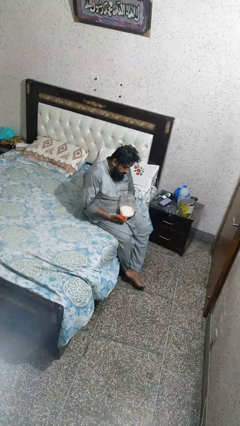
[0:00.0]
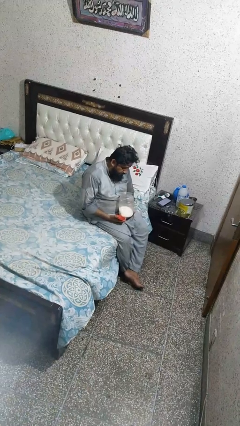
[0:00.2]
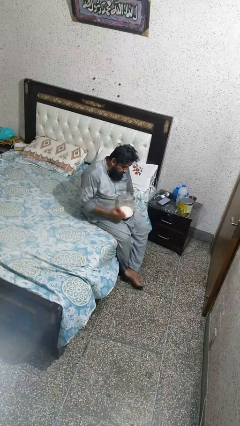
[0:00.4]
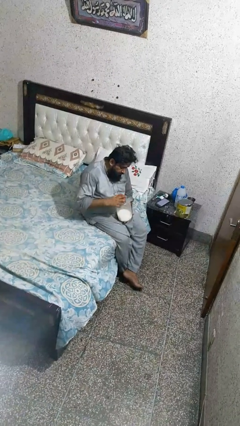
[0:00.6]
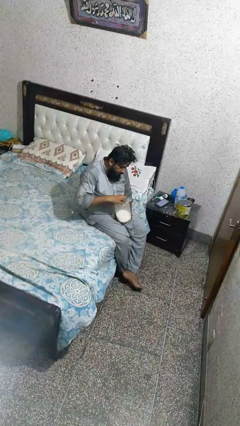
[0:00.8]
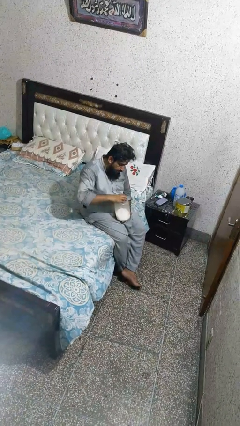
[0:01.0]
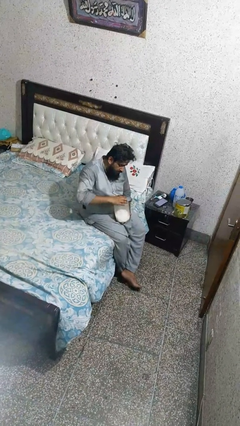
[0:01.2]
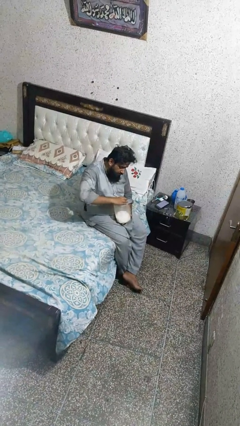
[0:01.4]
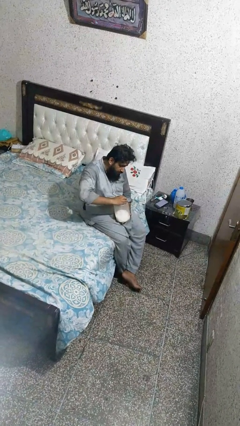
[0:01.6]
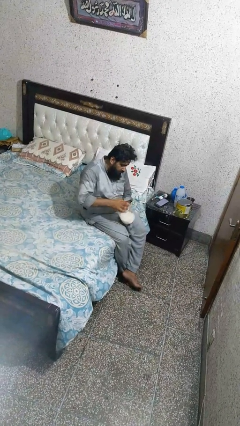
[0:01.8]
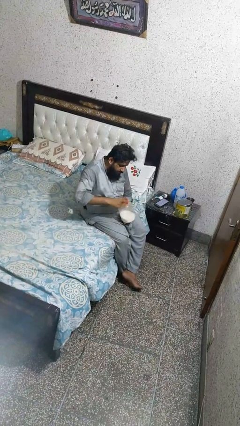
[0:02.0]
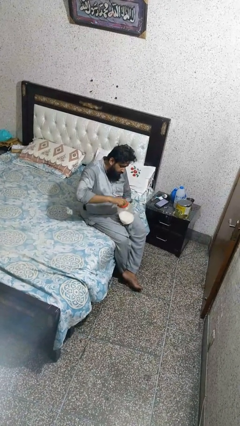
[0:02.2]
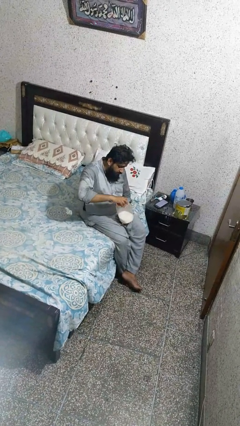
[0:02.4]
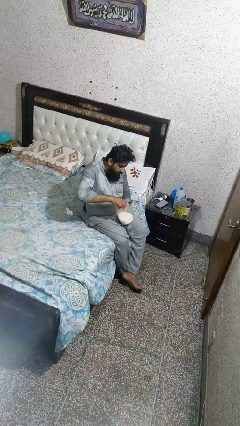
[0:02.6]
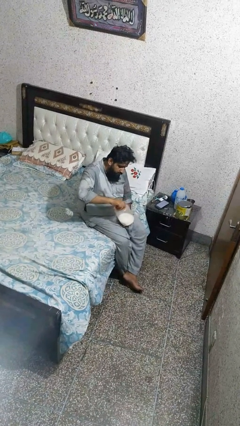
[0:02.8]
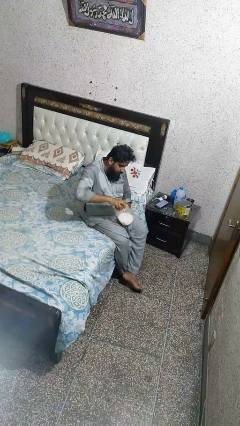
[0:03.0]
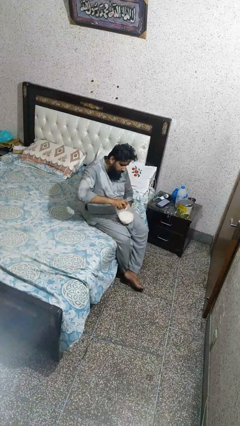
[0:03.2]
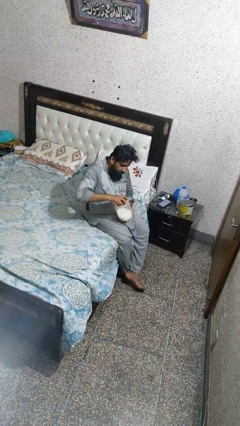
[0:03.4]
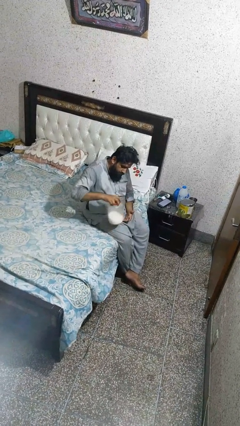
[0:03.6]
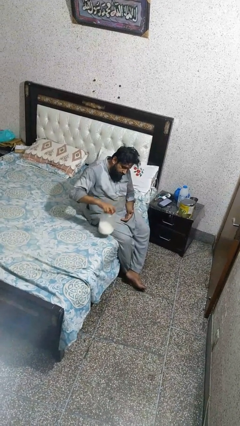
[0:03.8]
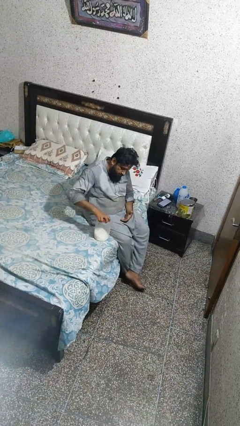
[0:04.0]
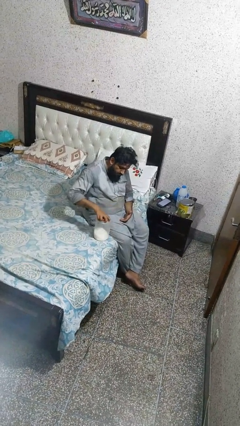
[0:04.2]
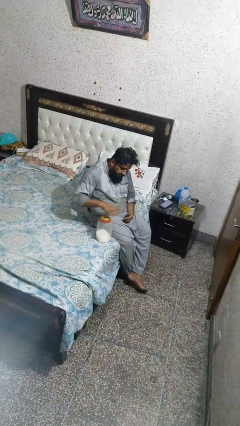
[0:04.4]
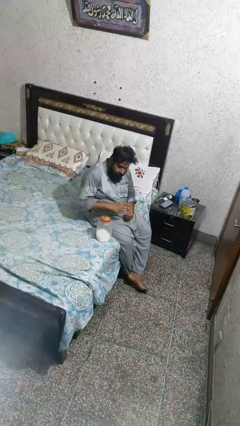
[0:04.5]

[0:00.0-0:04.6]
person closes jar

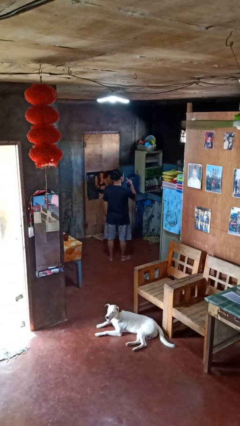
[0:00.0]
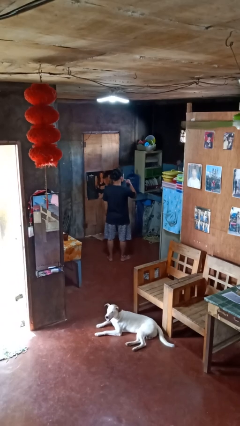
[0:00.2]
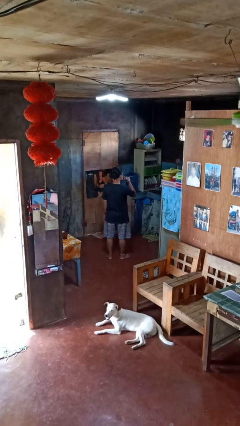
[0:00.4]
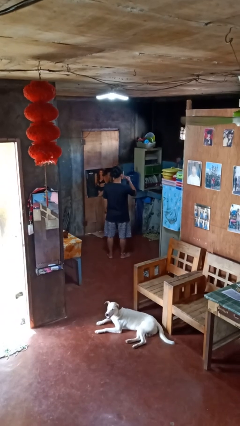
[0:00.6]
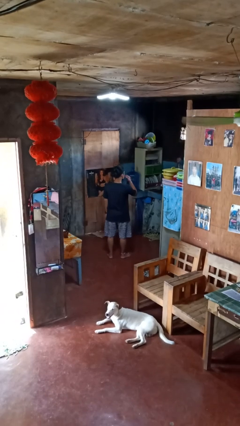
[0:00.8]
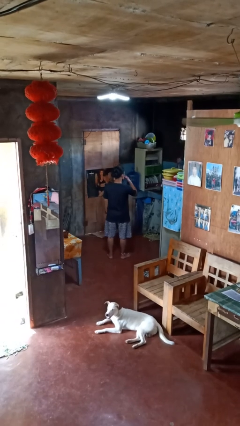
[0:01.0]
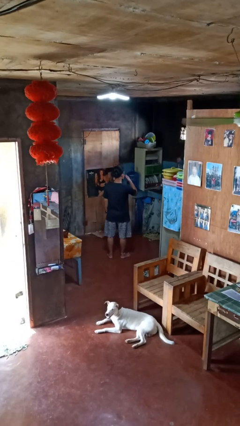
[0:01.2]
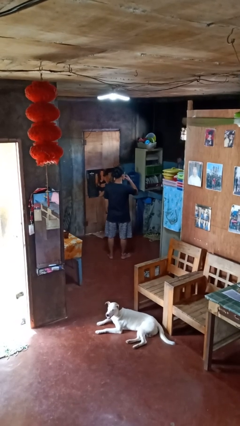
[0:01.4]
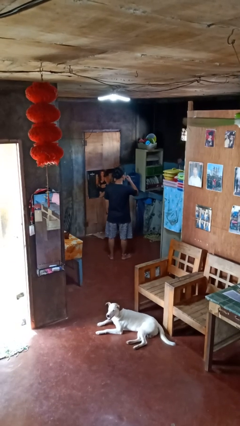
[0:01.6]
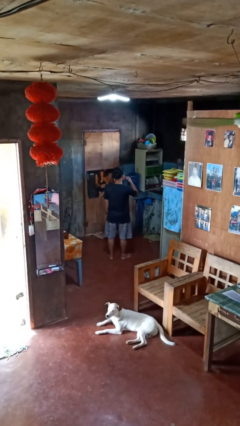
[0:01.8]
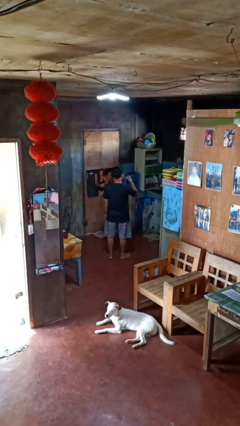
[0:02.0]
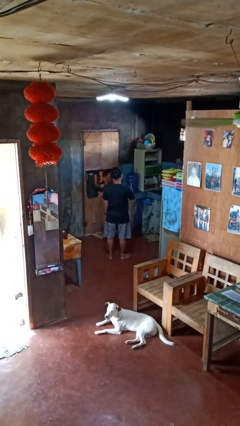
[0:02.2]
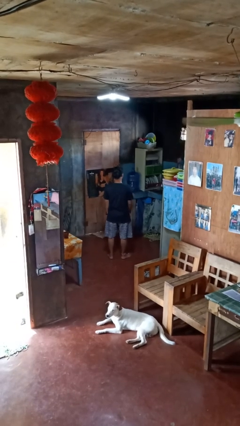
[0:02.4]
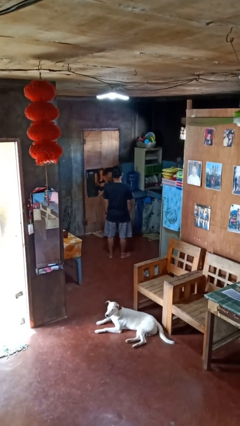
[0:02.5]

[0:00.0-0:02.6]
person licks fingers

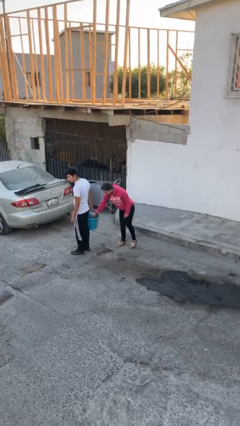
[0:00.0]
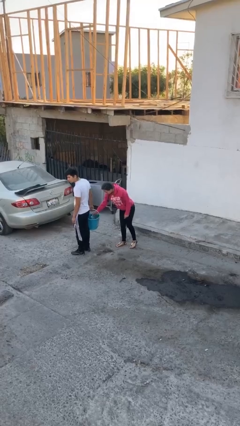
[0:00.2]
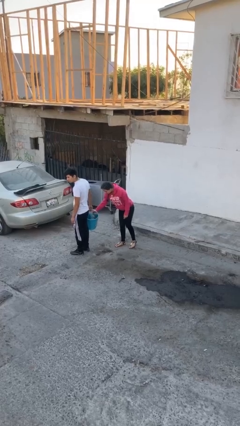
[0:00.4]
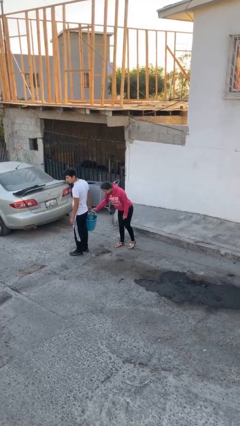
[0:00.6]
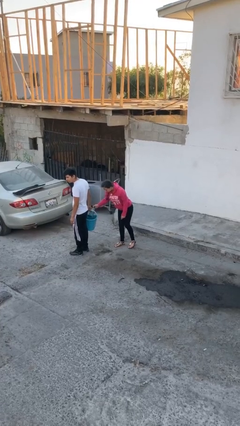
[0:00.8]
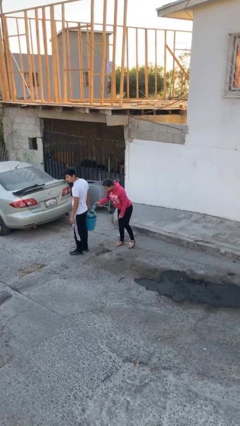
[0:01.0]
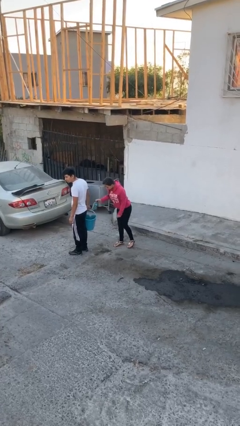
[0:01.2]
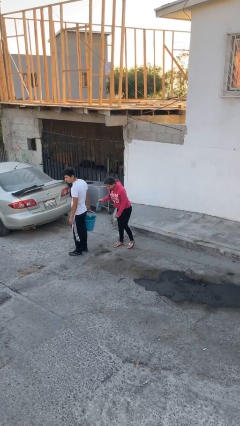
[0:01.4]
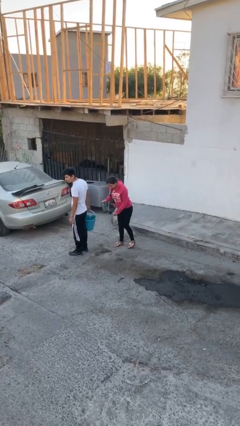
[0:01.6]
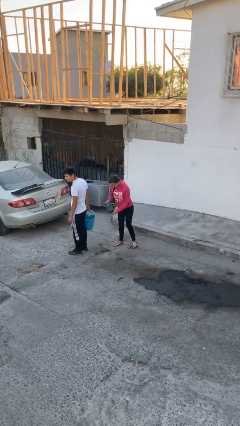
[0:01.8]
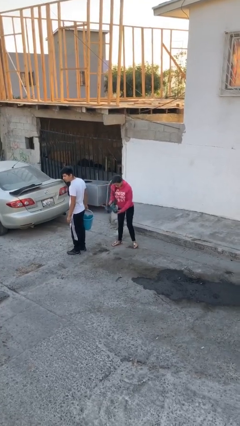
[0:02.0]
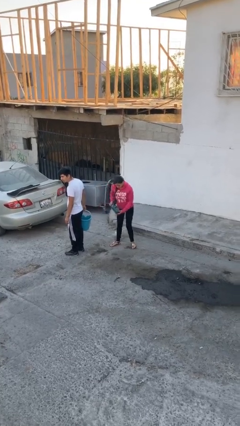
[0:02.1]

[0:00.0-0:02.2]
person steals object from person

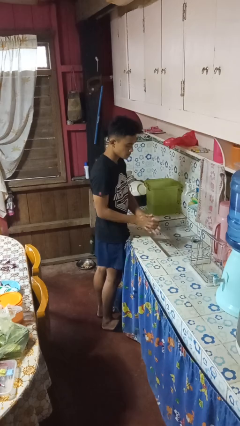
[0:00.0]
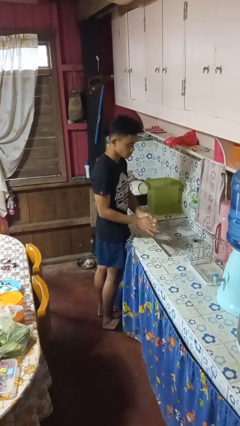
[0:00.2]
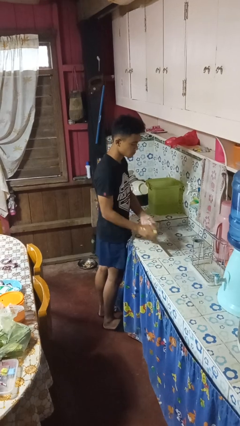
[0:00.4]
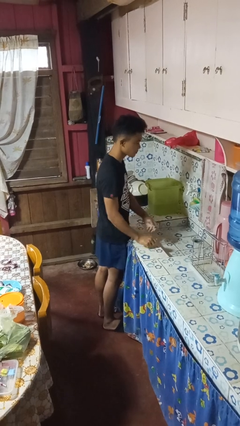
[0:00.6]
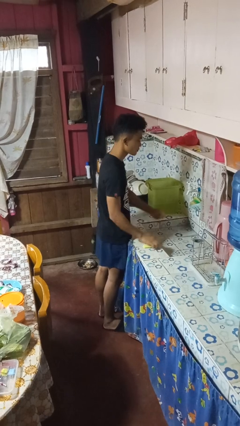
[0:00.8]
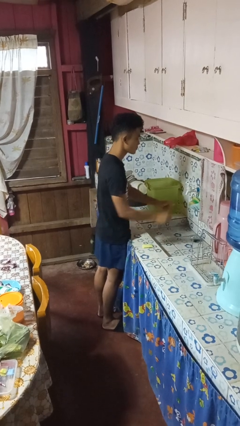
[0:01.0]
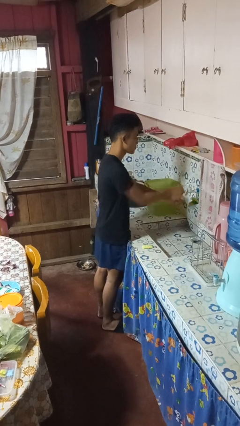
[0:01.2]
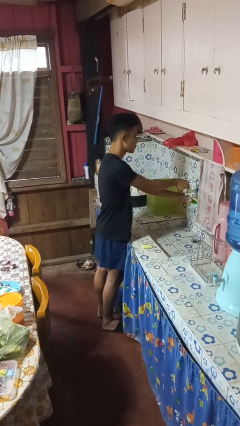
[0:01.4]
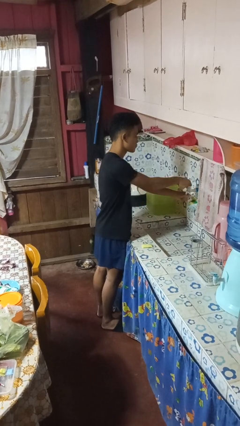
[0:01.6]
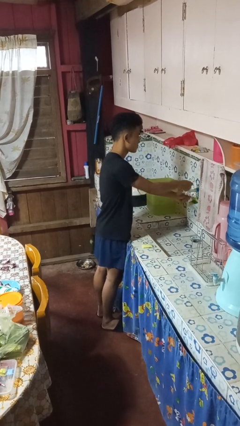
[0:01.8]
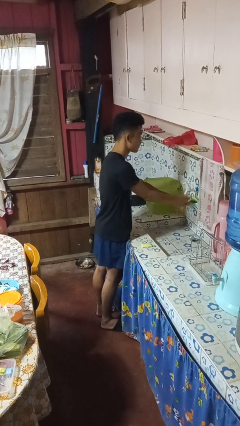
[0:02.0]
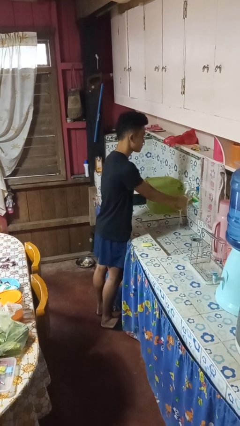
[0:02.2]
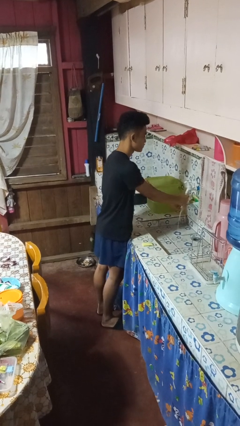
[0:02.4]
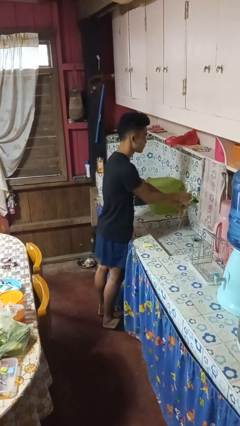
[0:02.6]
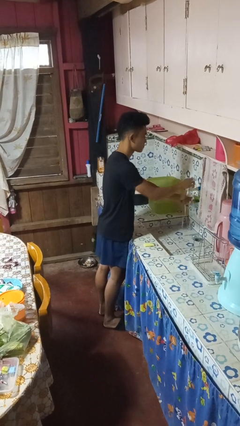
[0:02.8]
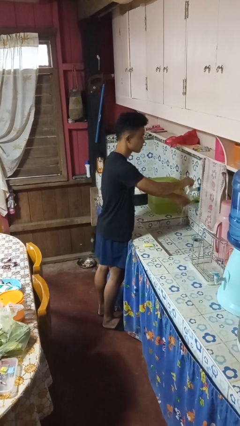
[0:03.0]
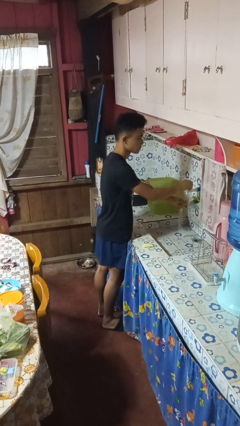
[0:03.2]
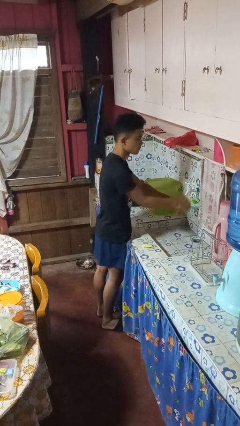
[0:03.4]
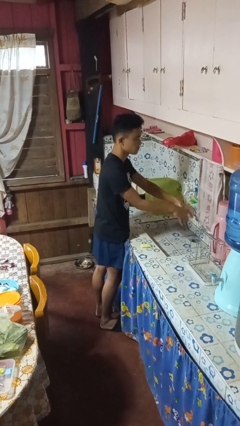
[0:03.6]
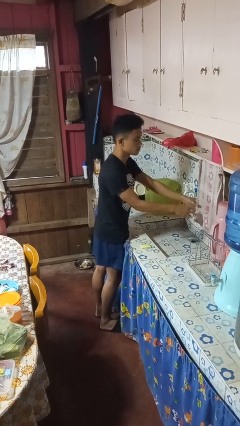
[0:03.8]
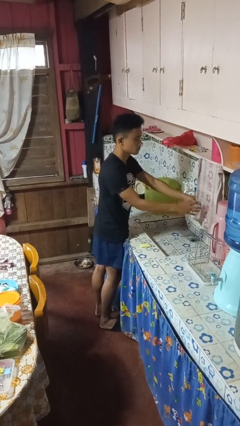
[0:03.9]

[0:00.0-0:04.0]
person washes hands

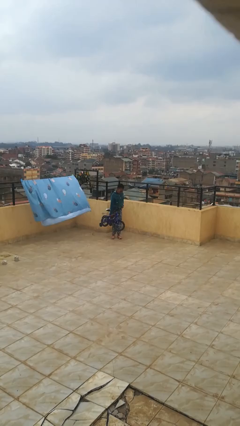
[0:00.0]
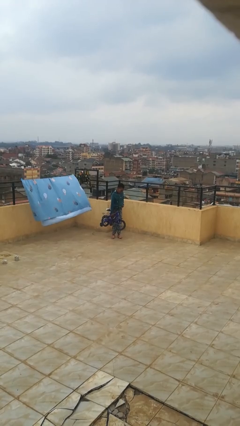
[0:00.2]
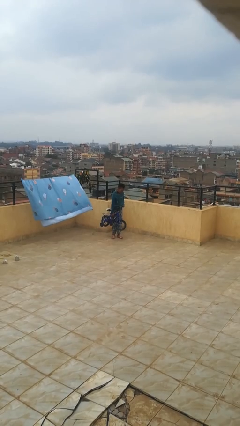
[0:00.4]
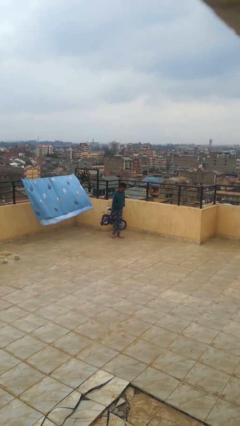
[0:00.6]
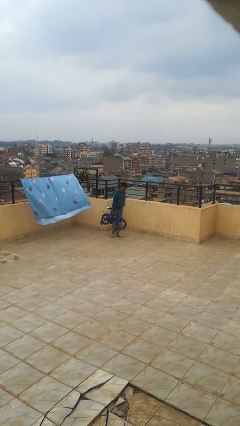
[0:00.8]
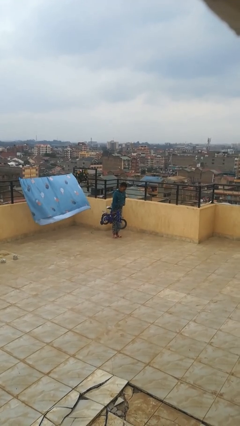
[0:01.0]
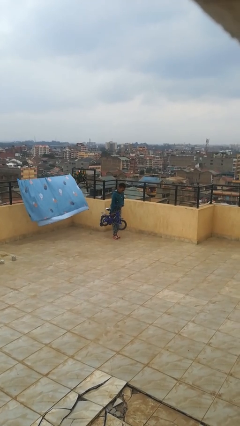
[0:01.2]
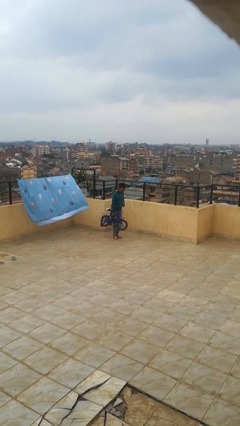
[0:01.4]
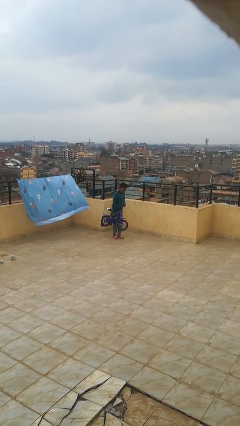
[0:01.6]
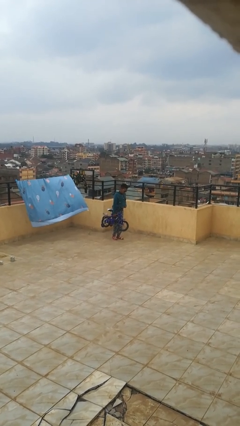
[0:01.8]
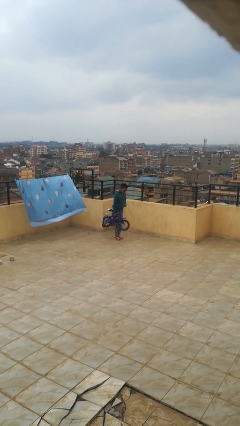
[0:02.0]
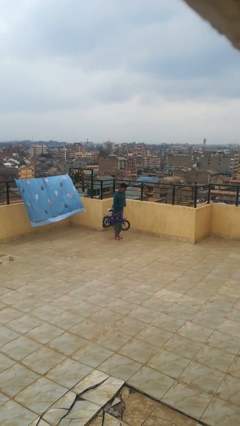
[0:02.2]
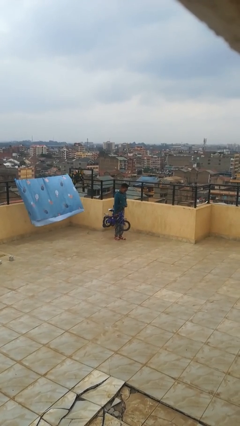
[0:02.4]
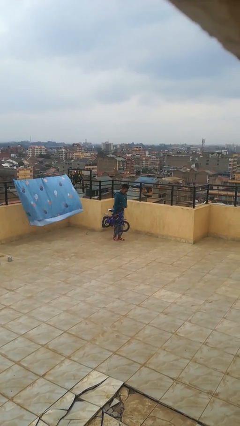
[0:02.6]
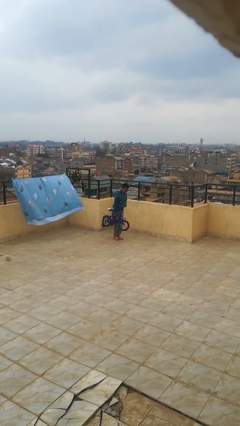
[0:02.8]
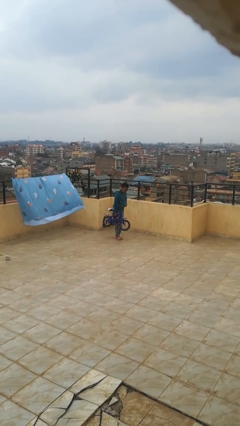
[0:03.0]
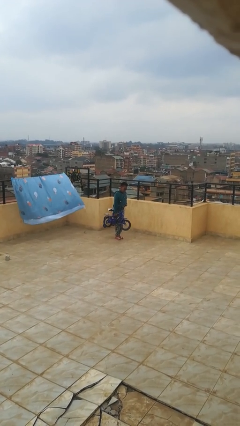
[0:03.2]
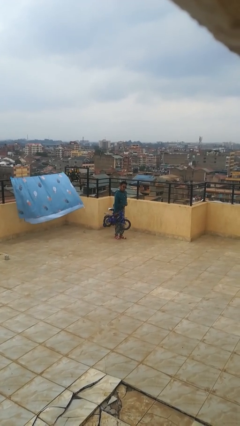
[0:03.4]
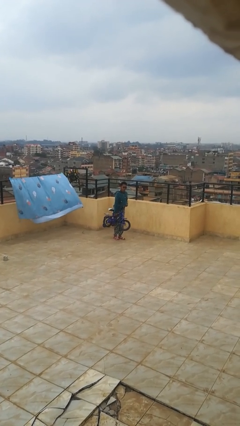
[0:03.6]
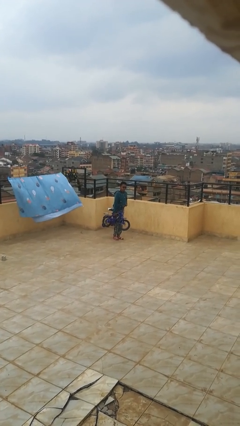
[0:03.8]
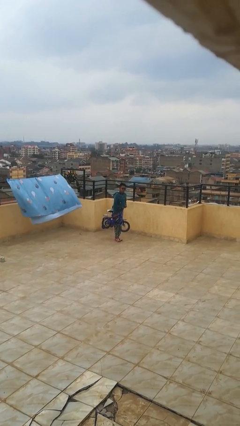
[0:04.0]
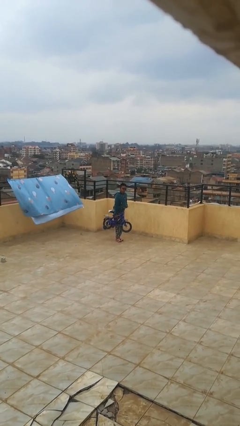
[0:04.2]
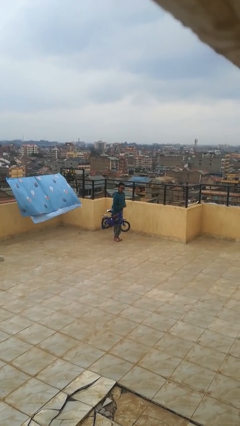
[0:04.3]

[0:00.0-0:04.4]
person carries bicycle
